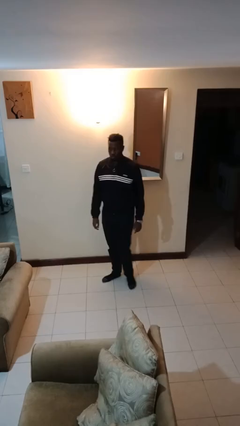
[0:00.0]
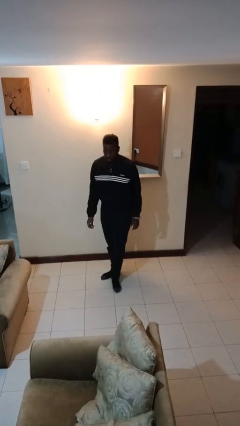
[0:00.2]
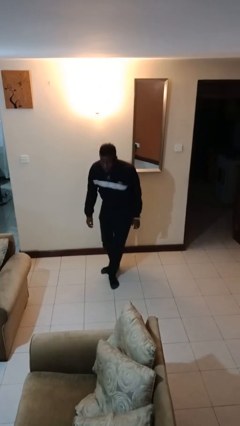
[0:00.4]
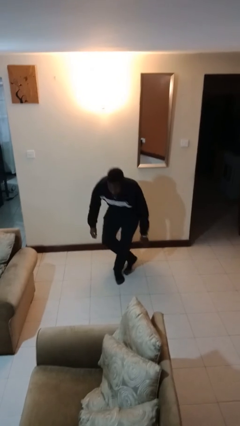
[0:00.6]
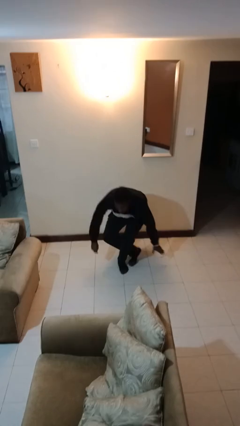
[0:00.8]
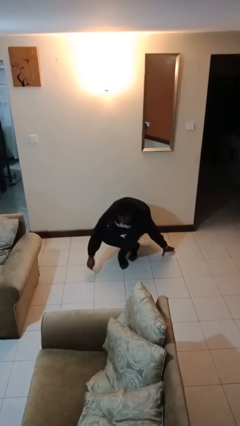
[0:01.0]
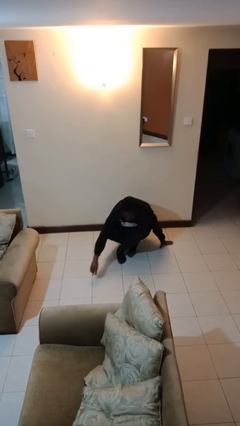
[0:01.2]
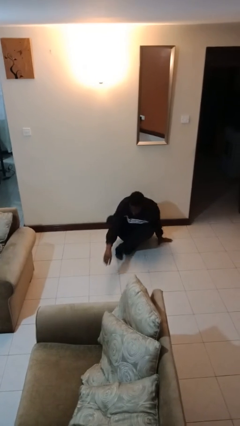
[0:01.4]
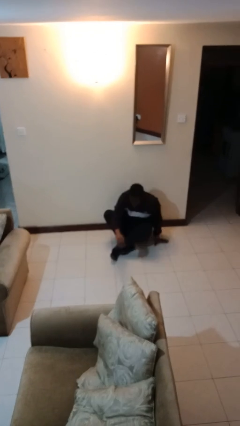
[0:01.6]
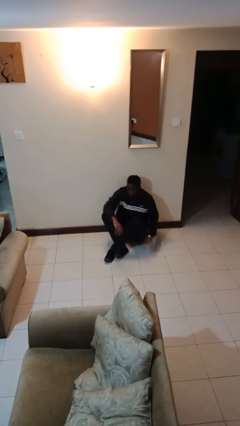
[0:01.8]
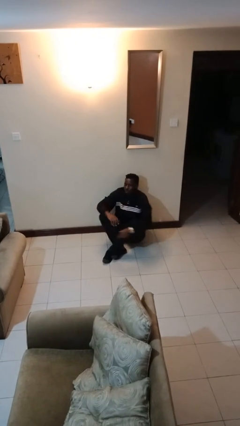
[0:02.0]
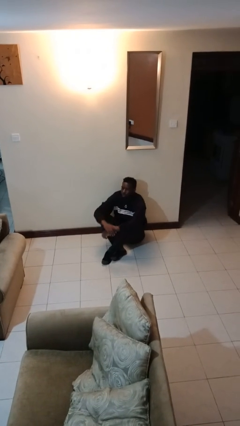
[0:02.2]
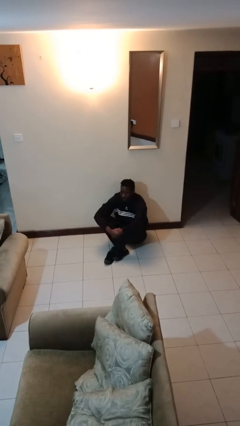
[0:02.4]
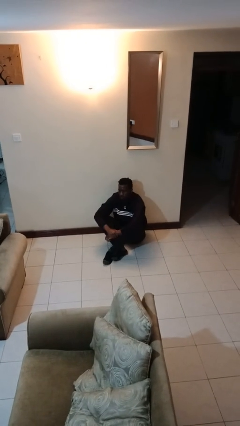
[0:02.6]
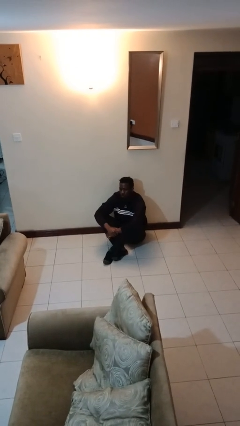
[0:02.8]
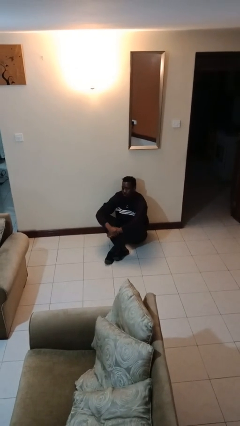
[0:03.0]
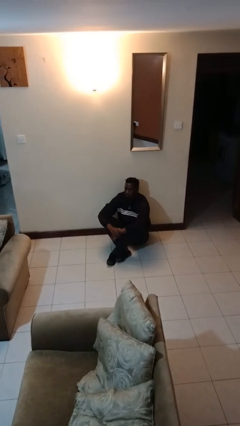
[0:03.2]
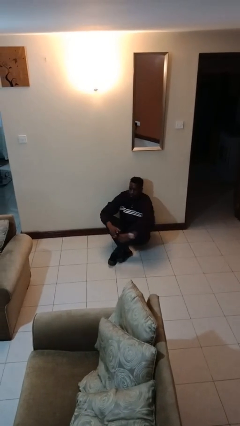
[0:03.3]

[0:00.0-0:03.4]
person sits crisscross

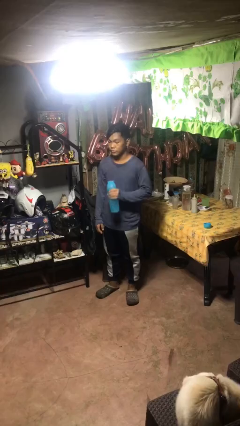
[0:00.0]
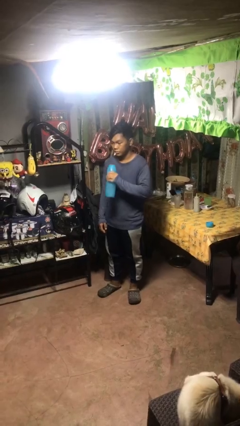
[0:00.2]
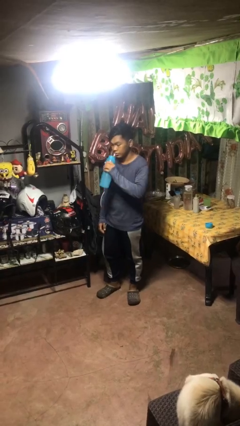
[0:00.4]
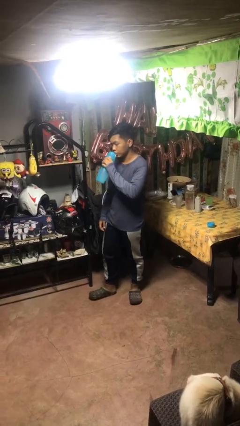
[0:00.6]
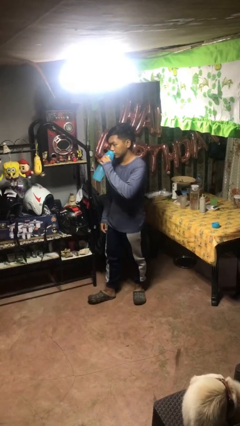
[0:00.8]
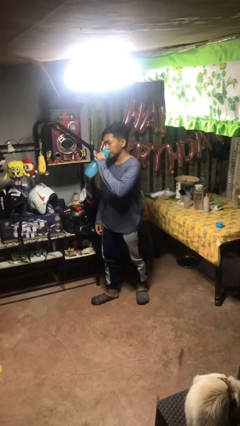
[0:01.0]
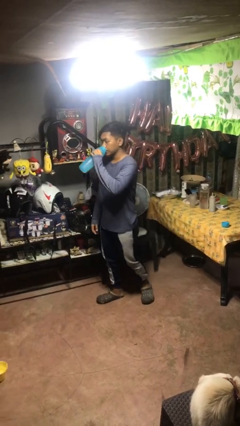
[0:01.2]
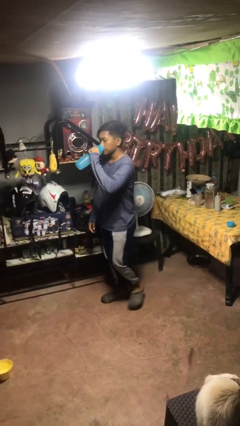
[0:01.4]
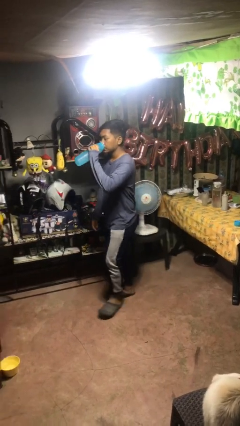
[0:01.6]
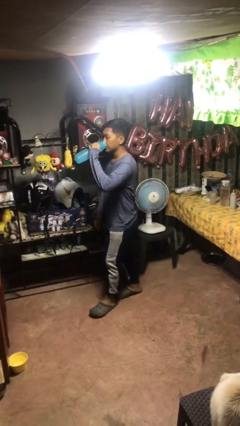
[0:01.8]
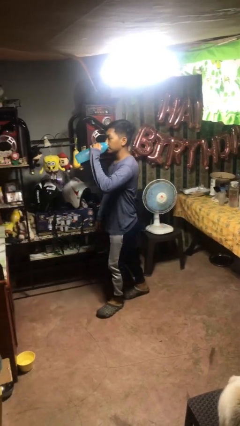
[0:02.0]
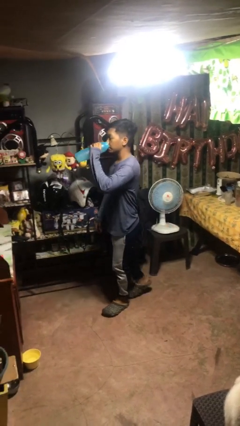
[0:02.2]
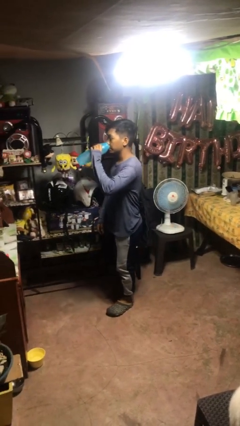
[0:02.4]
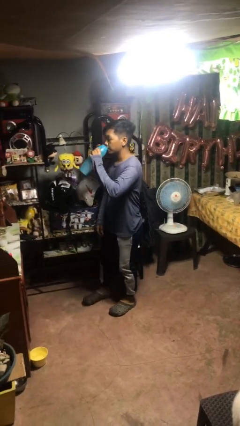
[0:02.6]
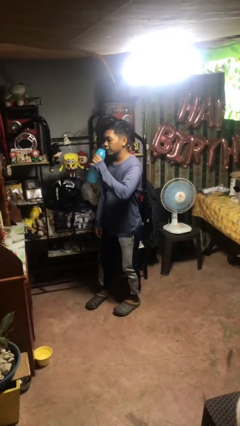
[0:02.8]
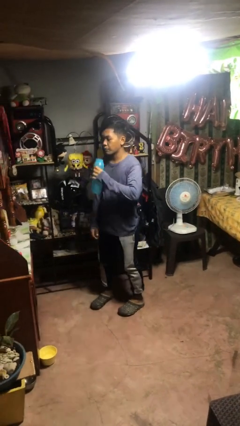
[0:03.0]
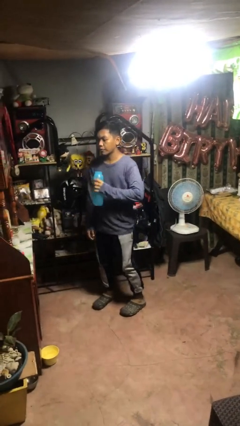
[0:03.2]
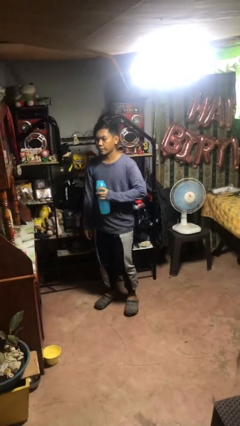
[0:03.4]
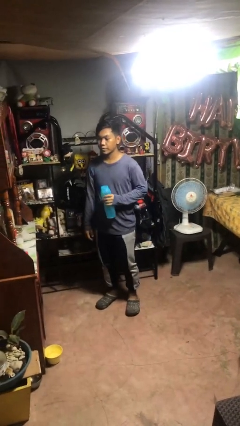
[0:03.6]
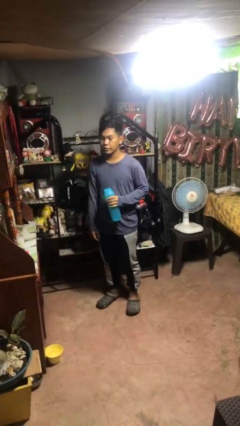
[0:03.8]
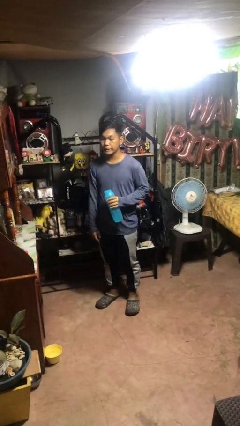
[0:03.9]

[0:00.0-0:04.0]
person drinks from bottle

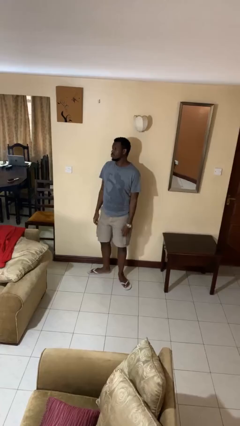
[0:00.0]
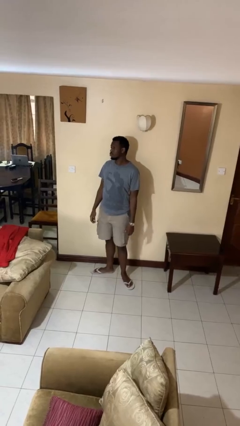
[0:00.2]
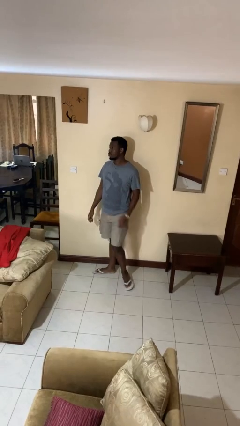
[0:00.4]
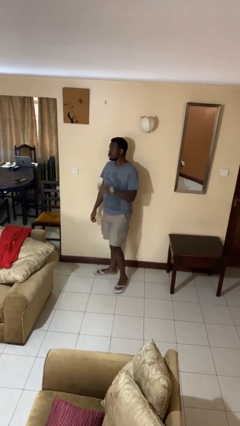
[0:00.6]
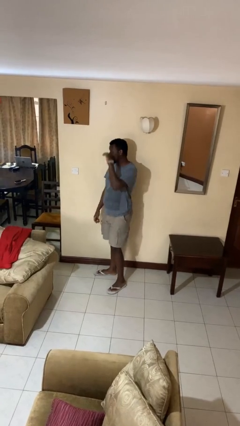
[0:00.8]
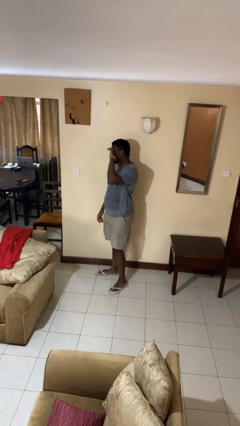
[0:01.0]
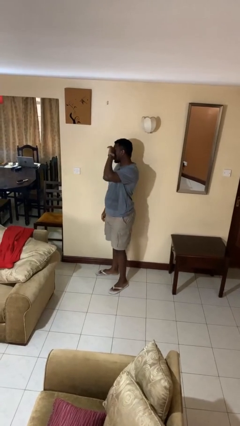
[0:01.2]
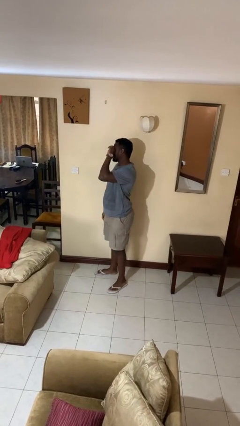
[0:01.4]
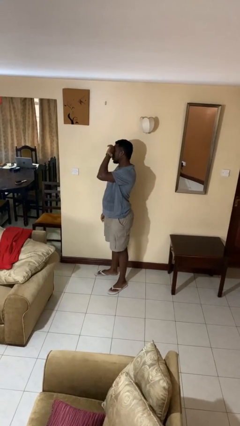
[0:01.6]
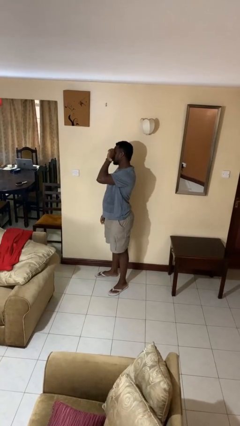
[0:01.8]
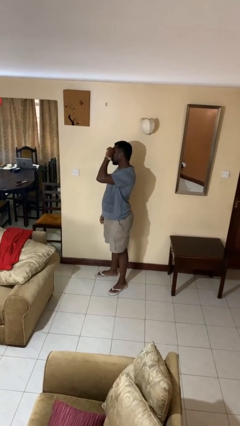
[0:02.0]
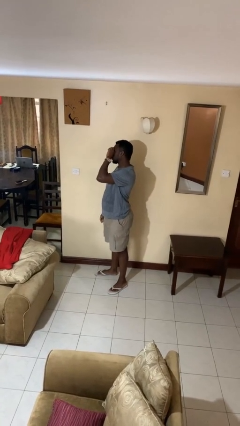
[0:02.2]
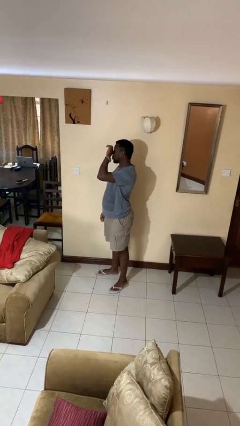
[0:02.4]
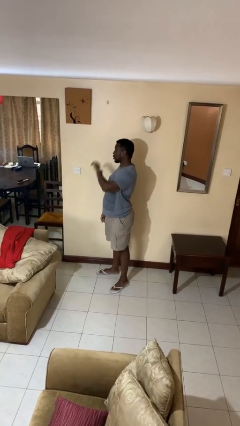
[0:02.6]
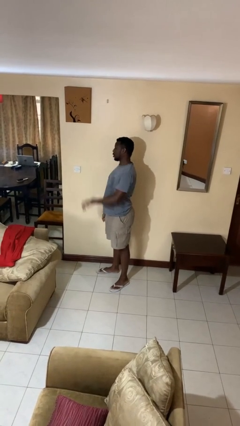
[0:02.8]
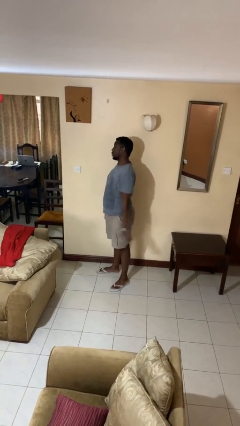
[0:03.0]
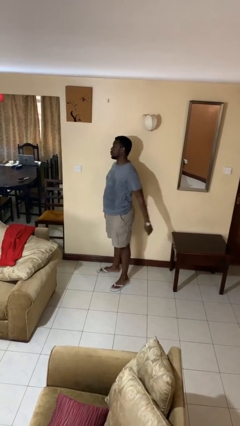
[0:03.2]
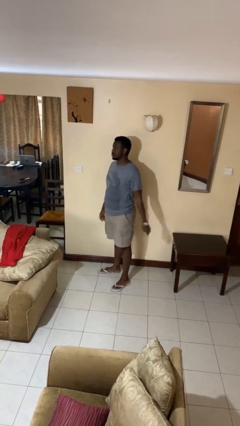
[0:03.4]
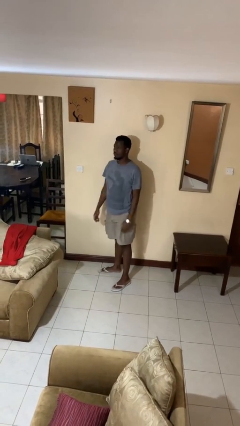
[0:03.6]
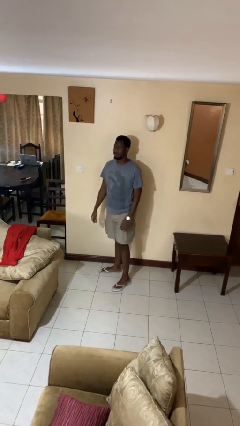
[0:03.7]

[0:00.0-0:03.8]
person rubs eyes

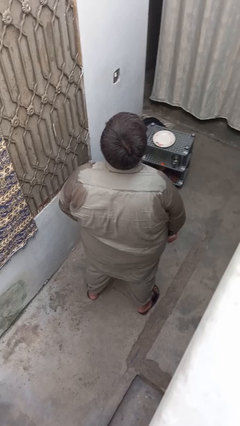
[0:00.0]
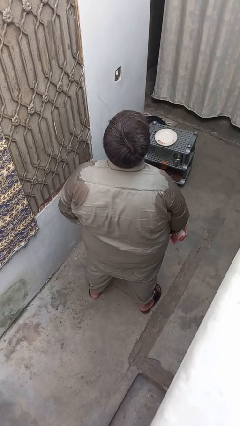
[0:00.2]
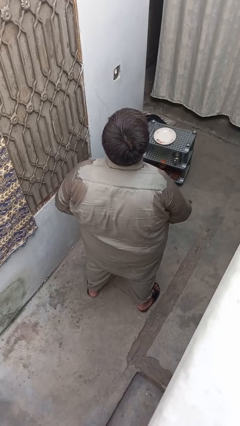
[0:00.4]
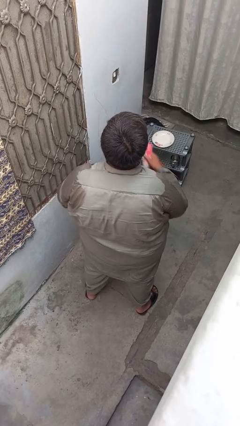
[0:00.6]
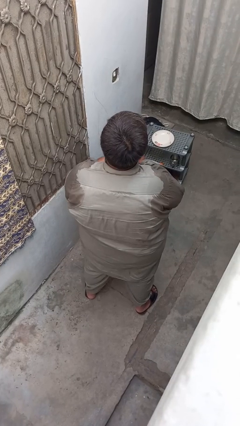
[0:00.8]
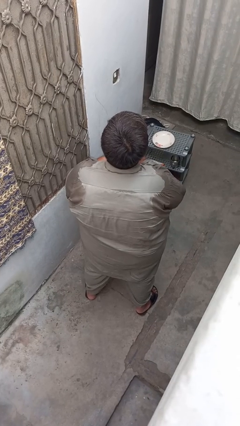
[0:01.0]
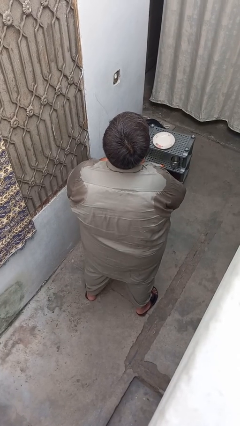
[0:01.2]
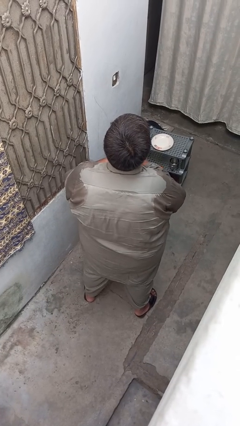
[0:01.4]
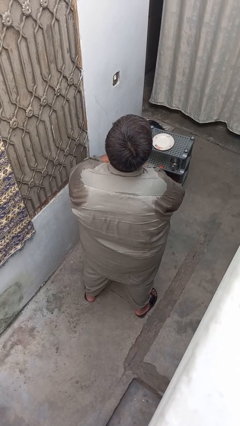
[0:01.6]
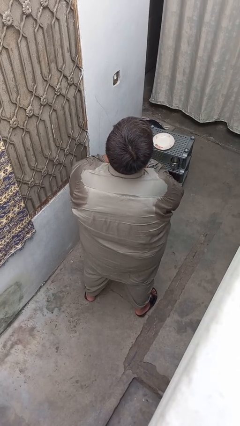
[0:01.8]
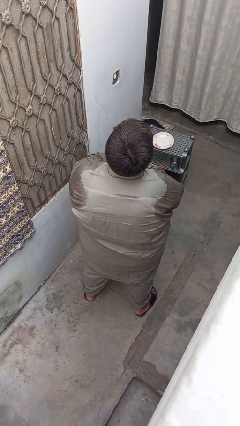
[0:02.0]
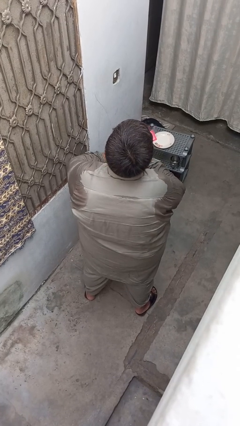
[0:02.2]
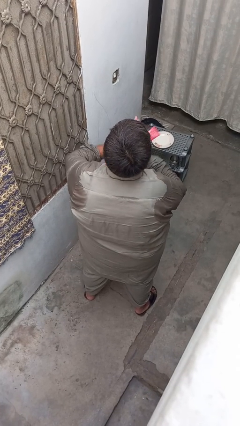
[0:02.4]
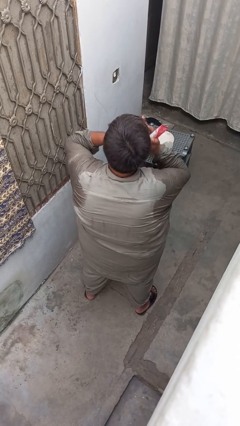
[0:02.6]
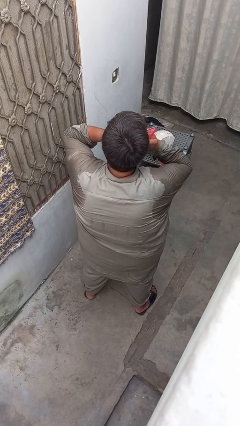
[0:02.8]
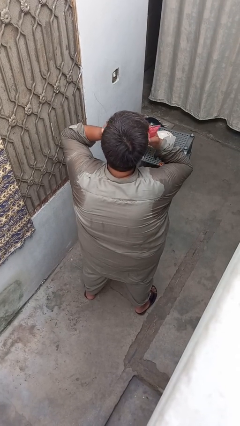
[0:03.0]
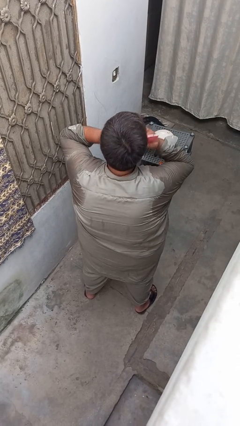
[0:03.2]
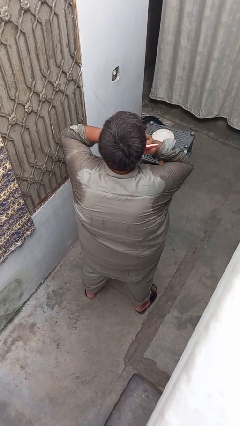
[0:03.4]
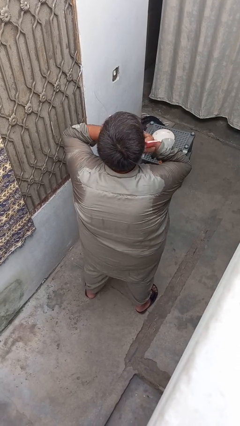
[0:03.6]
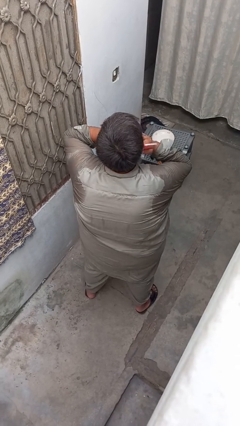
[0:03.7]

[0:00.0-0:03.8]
person applies facial moisturizer

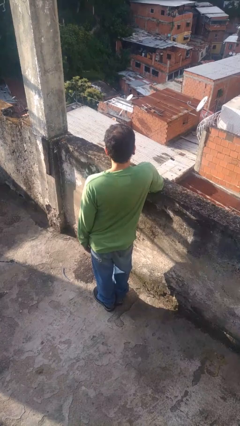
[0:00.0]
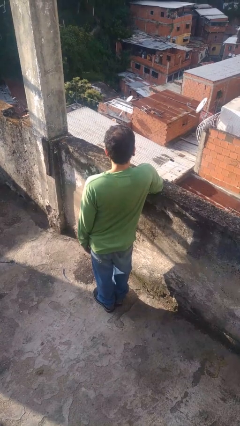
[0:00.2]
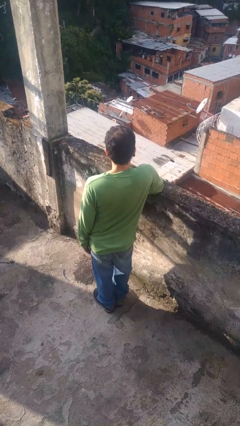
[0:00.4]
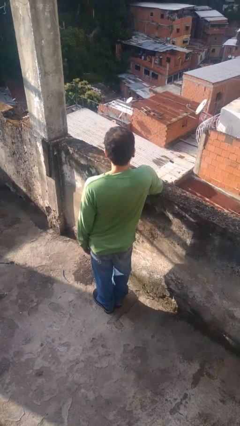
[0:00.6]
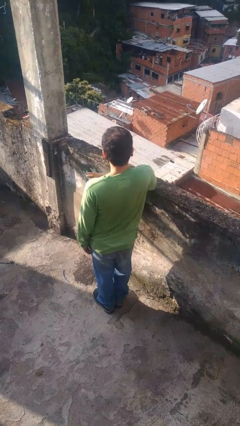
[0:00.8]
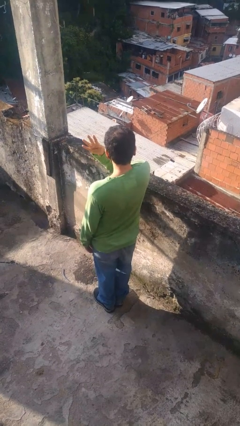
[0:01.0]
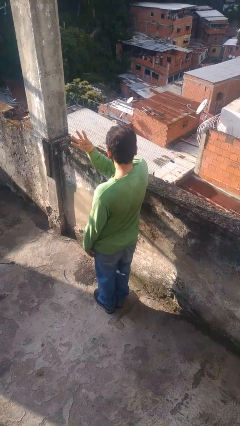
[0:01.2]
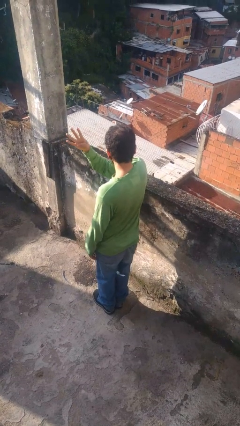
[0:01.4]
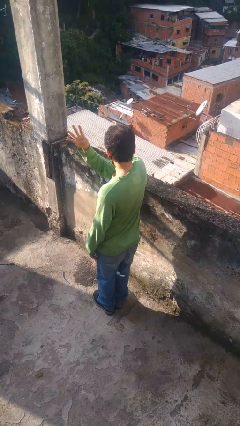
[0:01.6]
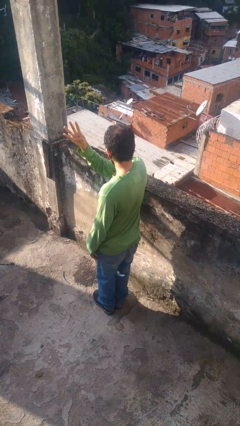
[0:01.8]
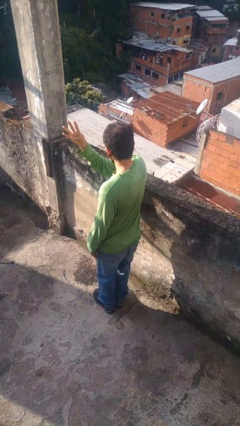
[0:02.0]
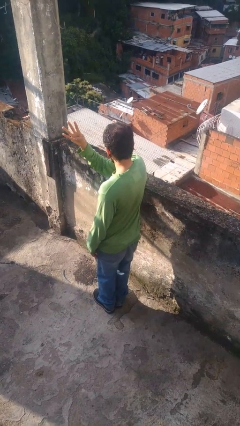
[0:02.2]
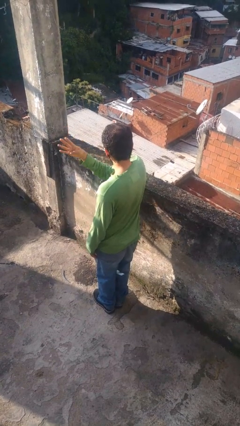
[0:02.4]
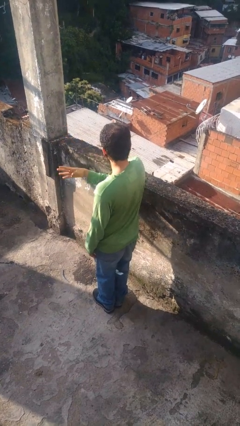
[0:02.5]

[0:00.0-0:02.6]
person gestures number four

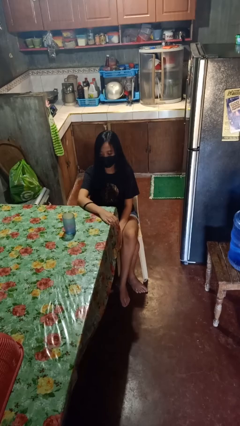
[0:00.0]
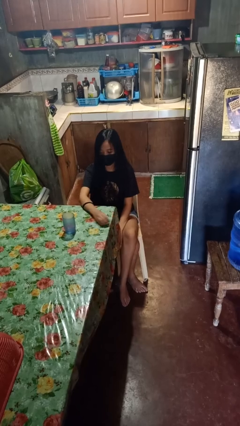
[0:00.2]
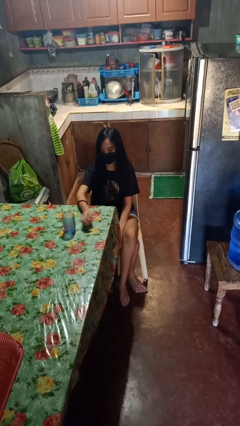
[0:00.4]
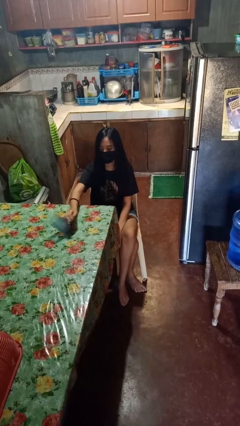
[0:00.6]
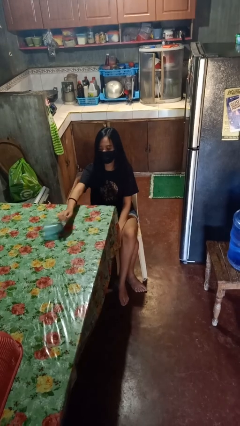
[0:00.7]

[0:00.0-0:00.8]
person knocks over glass
